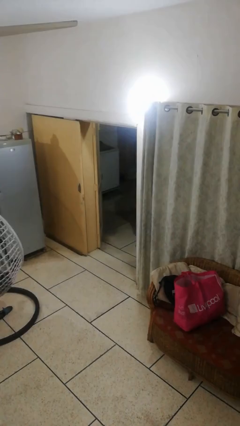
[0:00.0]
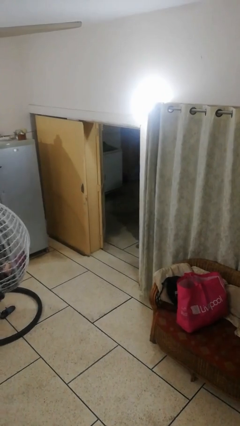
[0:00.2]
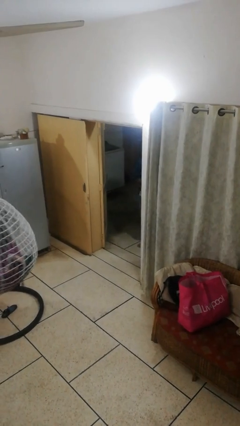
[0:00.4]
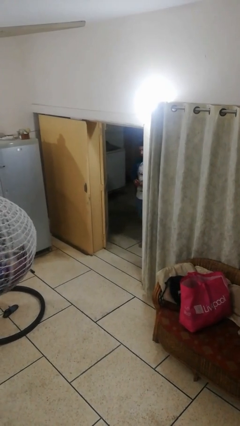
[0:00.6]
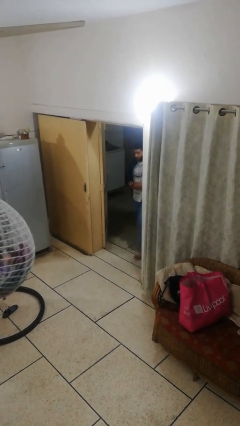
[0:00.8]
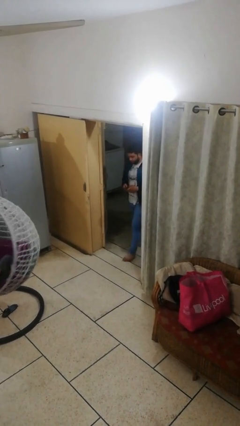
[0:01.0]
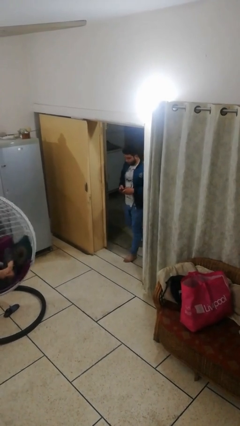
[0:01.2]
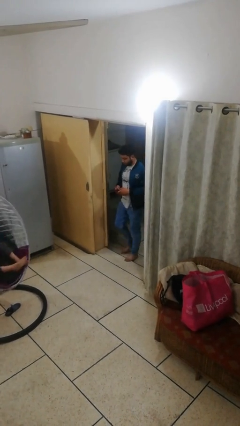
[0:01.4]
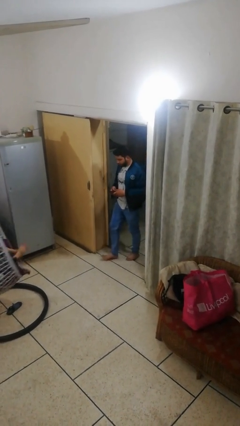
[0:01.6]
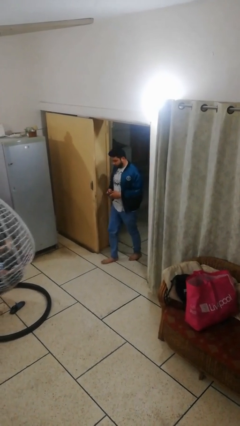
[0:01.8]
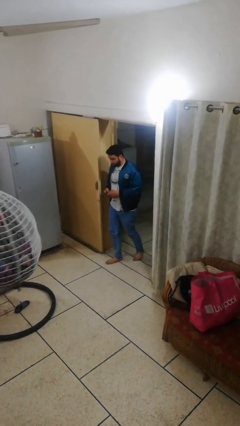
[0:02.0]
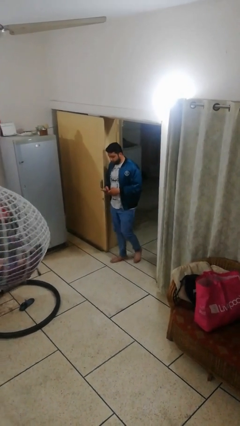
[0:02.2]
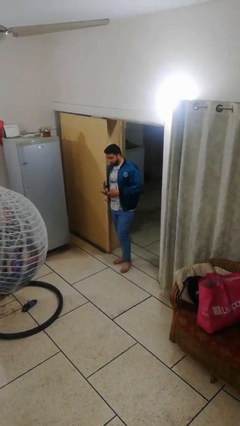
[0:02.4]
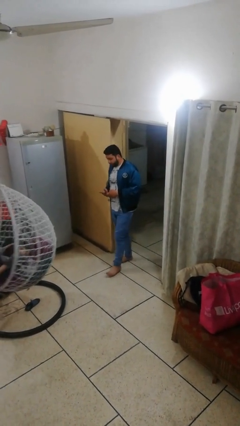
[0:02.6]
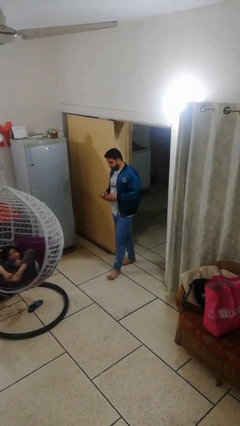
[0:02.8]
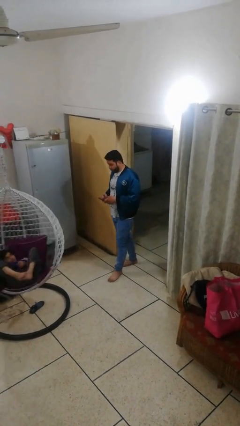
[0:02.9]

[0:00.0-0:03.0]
person enters scene through structure

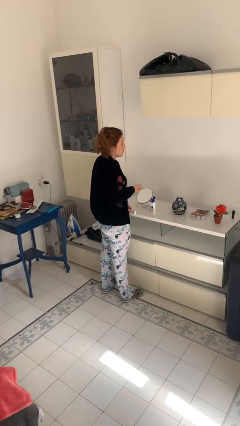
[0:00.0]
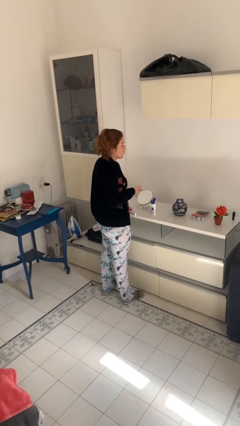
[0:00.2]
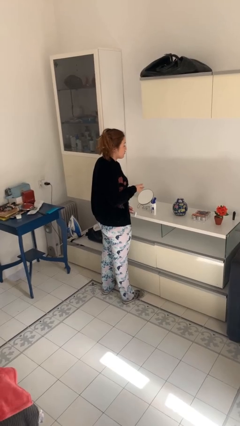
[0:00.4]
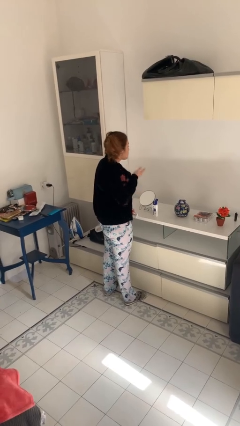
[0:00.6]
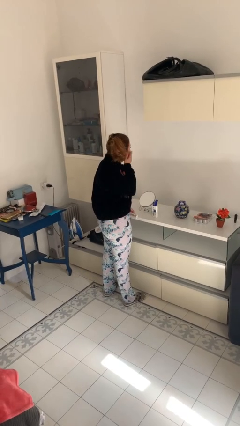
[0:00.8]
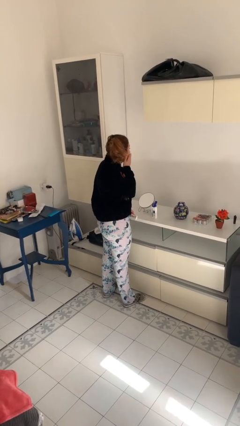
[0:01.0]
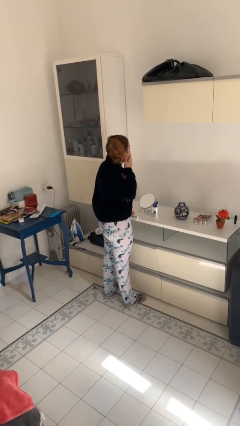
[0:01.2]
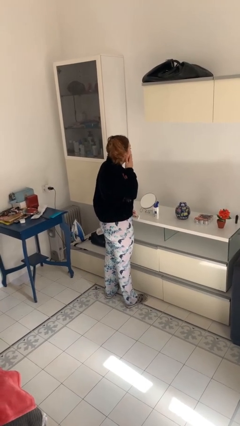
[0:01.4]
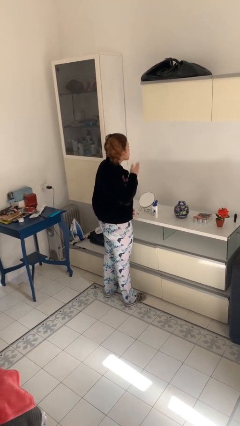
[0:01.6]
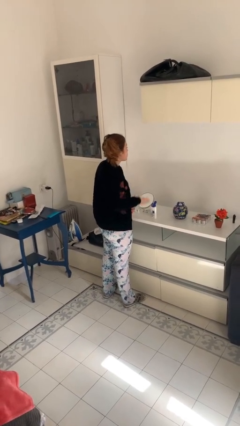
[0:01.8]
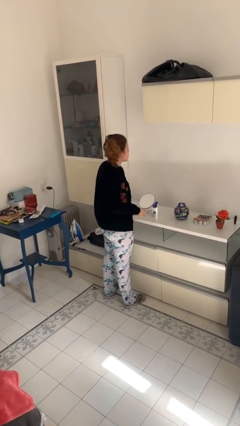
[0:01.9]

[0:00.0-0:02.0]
person applies shaving cream

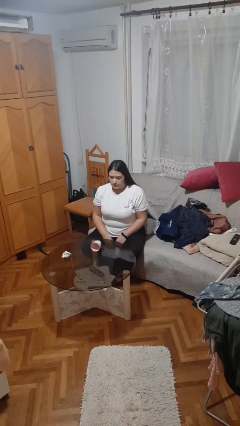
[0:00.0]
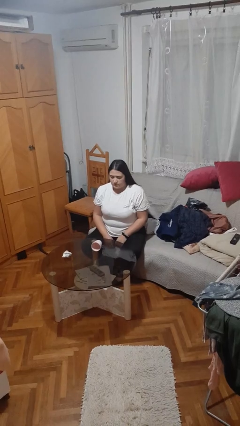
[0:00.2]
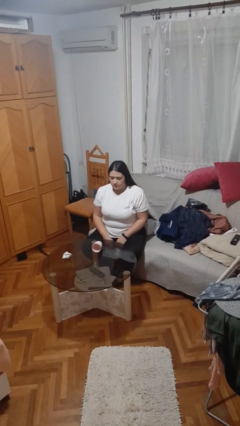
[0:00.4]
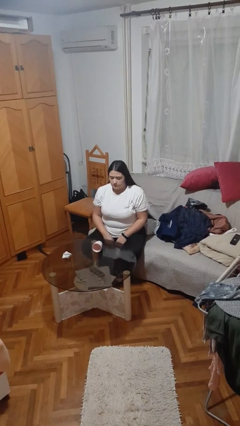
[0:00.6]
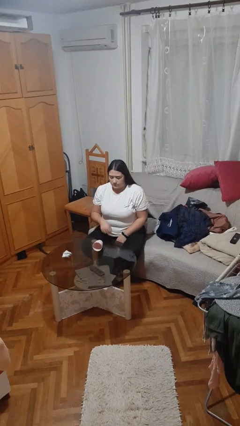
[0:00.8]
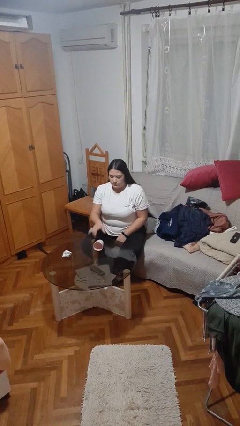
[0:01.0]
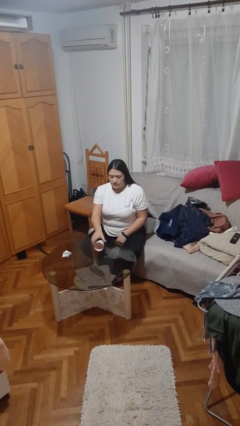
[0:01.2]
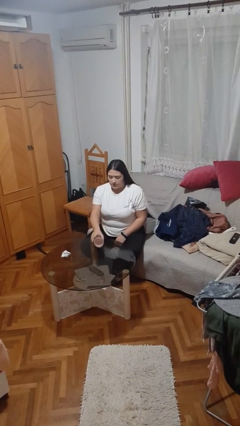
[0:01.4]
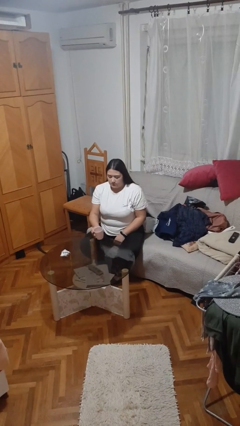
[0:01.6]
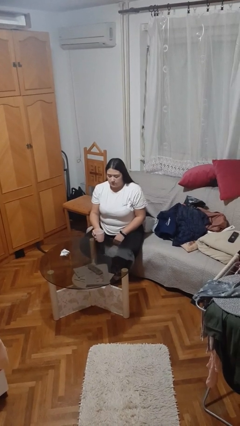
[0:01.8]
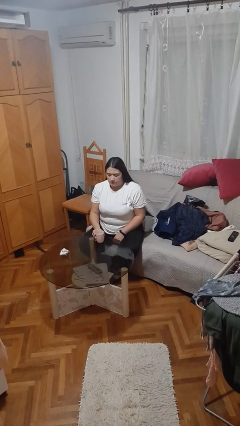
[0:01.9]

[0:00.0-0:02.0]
person sets upright glass

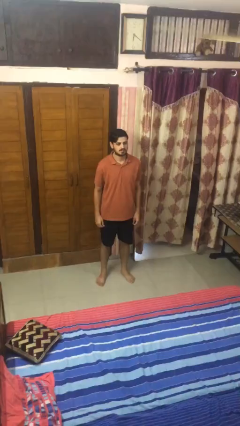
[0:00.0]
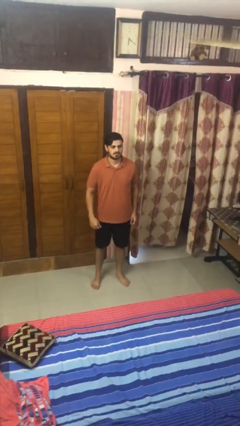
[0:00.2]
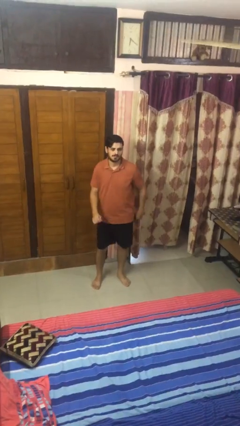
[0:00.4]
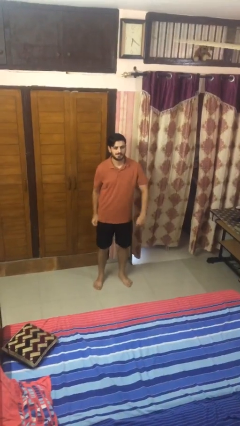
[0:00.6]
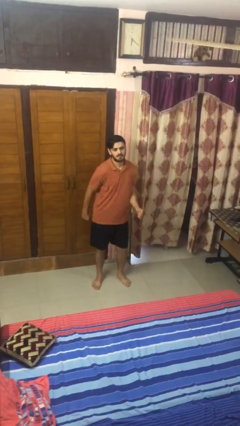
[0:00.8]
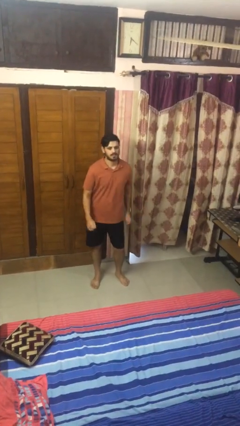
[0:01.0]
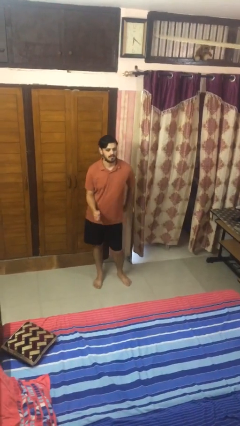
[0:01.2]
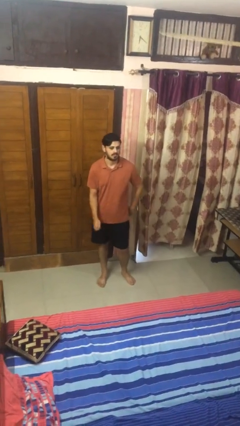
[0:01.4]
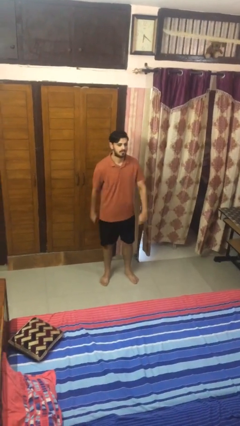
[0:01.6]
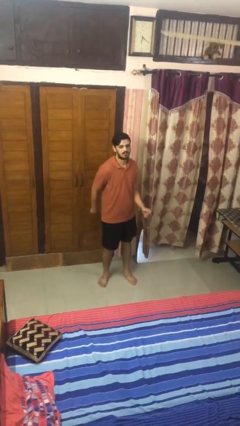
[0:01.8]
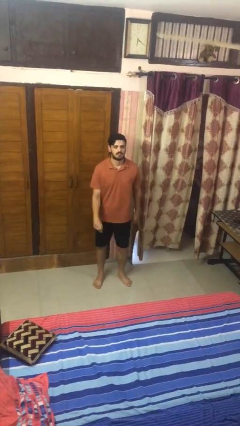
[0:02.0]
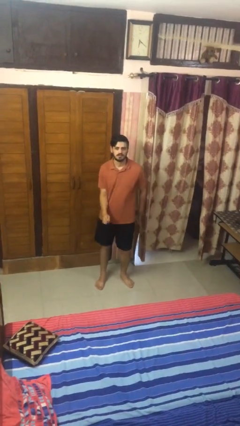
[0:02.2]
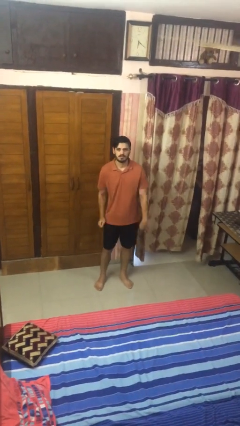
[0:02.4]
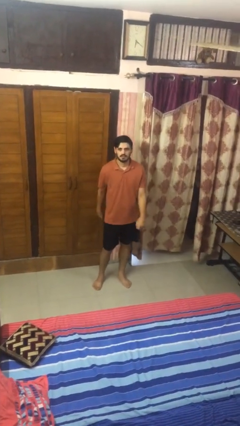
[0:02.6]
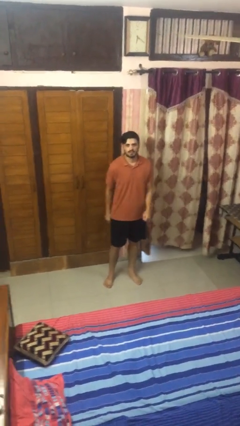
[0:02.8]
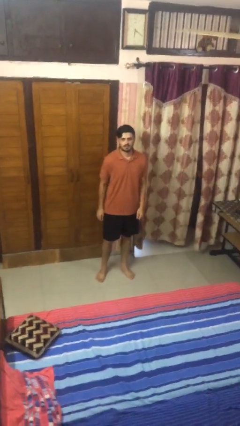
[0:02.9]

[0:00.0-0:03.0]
person dances in place

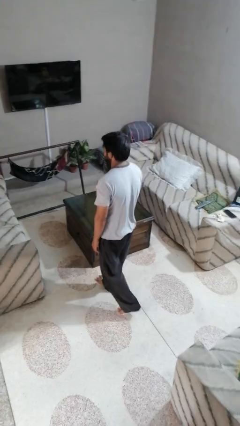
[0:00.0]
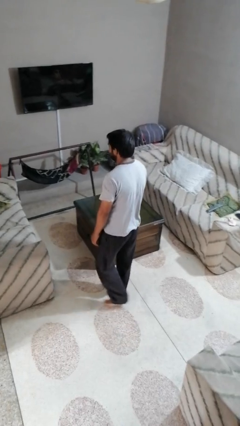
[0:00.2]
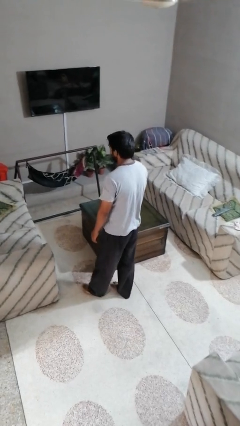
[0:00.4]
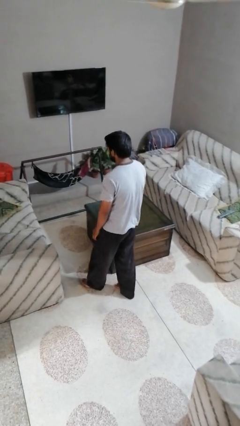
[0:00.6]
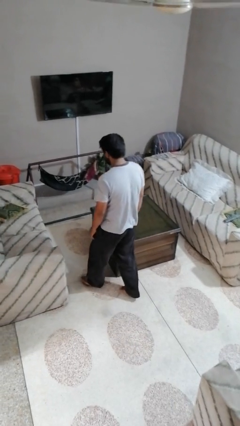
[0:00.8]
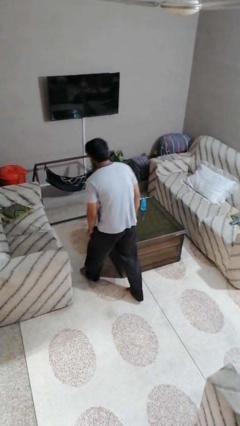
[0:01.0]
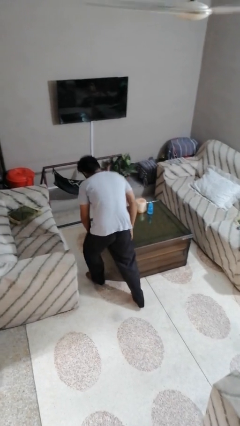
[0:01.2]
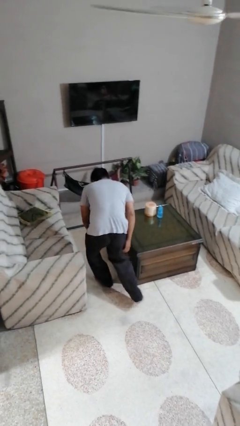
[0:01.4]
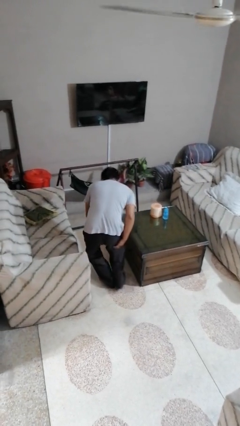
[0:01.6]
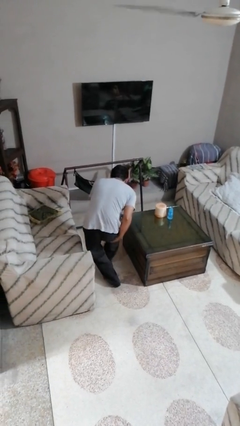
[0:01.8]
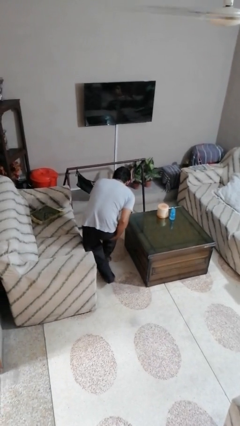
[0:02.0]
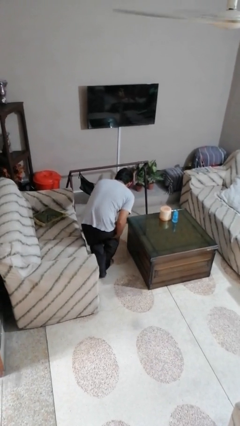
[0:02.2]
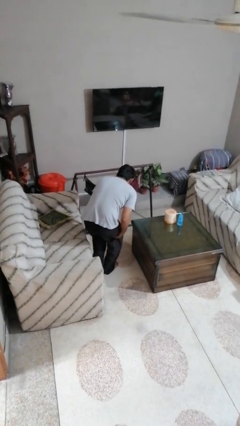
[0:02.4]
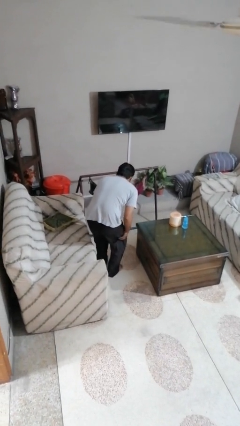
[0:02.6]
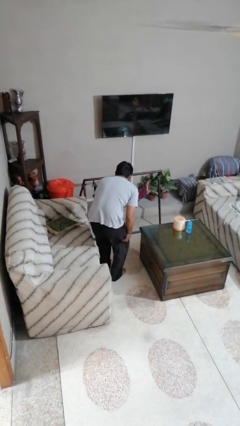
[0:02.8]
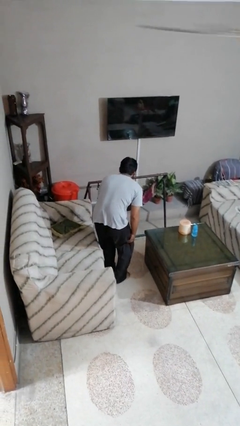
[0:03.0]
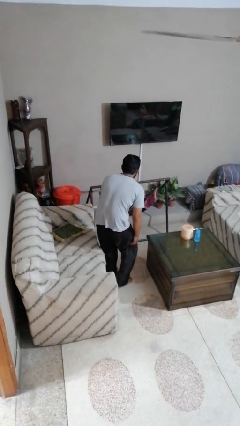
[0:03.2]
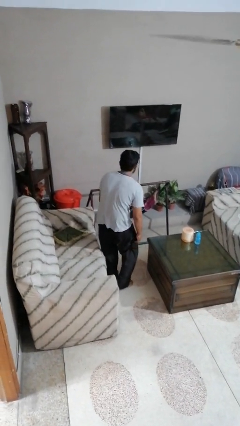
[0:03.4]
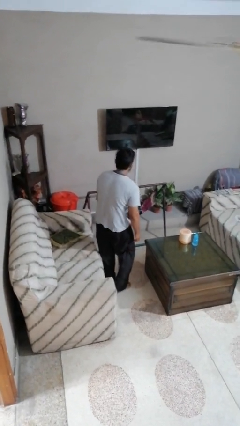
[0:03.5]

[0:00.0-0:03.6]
person bumps into table

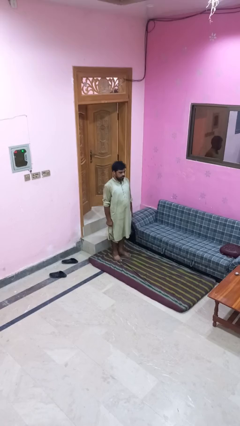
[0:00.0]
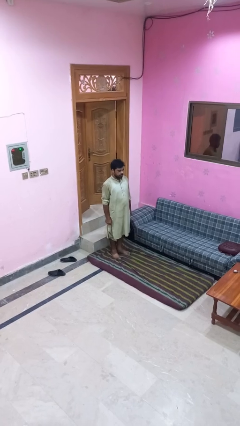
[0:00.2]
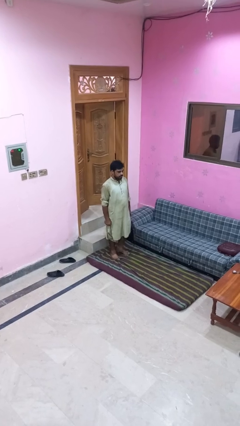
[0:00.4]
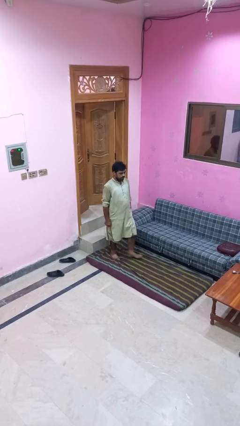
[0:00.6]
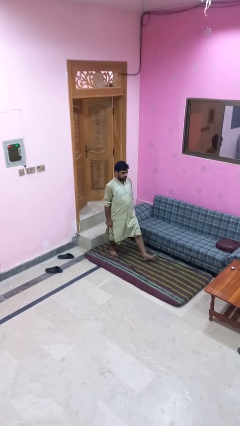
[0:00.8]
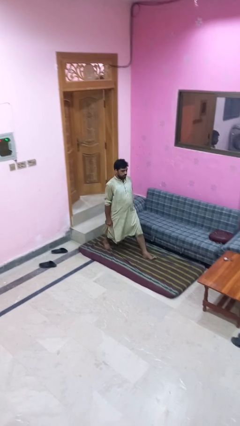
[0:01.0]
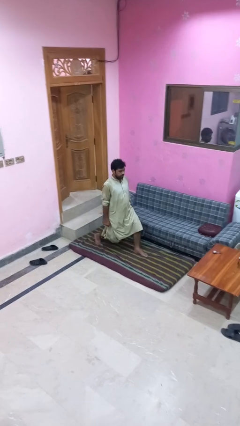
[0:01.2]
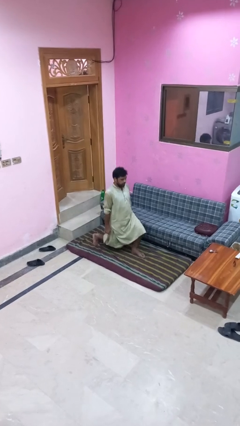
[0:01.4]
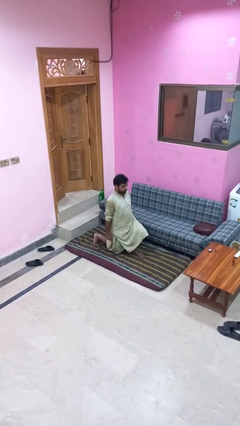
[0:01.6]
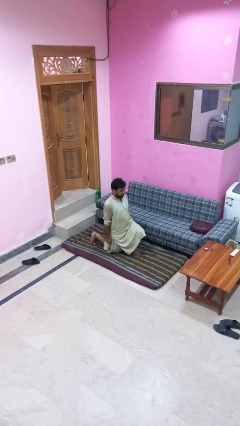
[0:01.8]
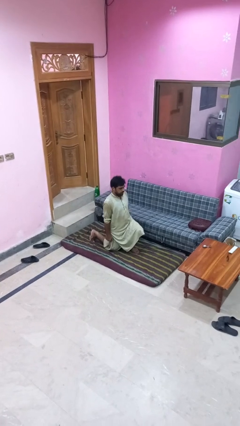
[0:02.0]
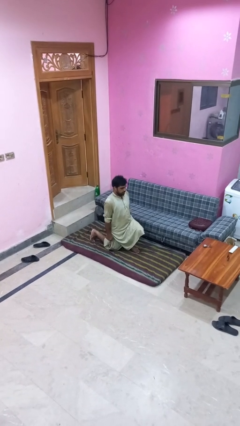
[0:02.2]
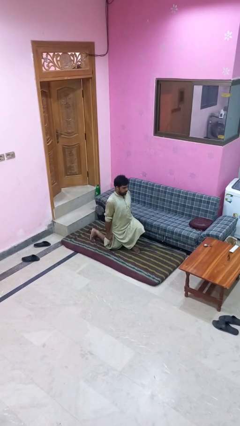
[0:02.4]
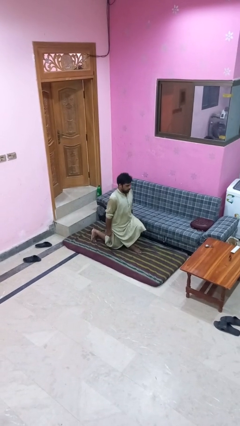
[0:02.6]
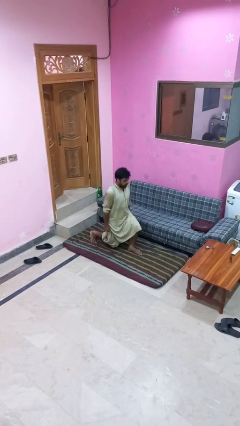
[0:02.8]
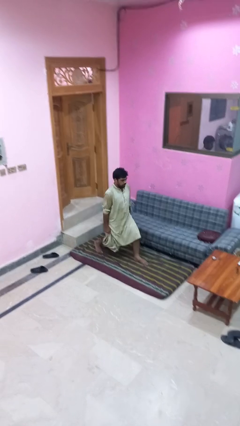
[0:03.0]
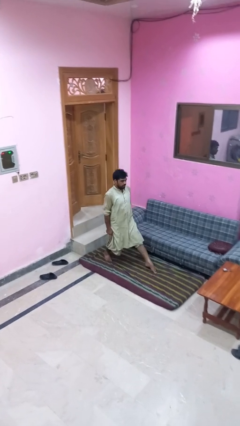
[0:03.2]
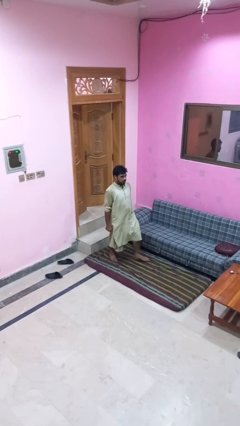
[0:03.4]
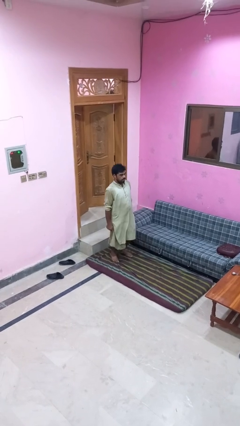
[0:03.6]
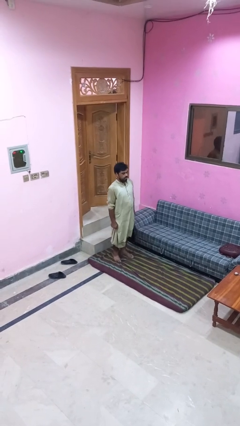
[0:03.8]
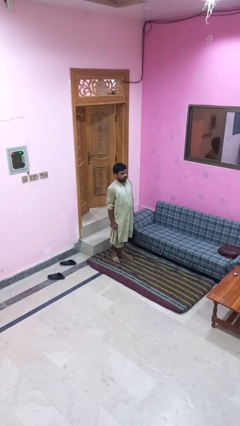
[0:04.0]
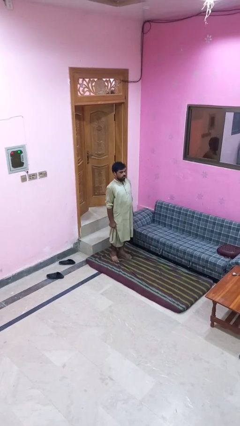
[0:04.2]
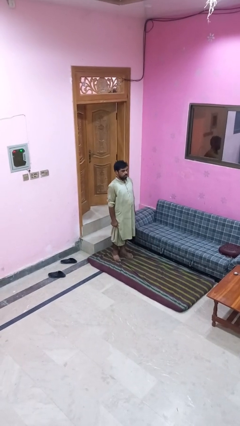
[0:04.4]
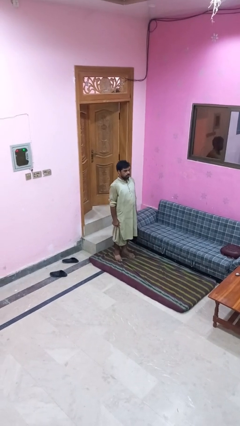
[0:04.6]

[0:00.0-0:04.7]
person exercises with lunges
